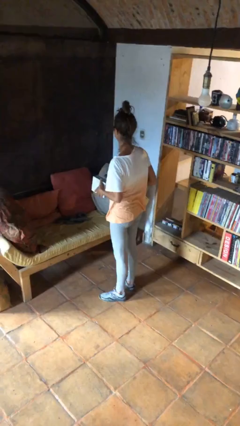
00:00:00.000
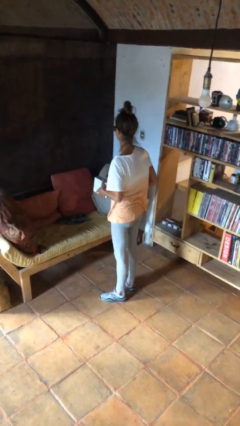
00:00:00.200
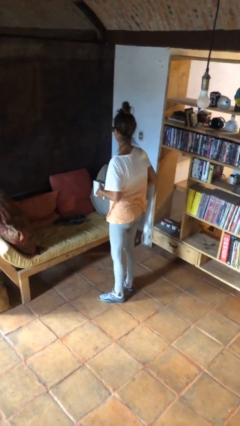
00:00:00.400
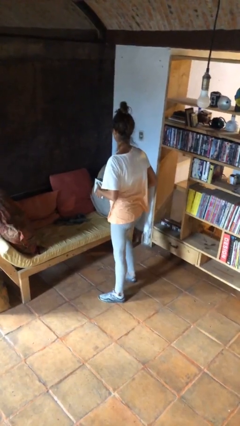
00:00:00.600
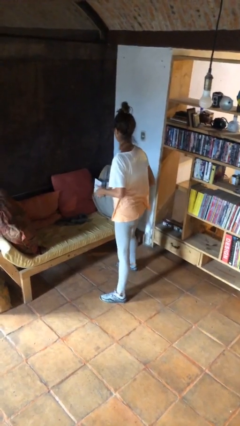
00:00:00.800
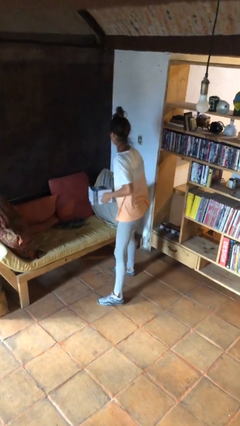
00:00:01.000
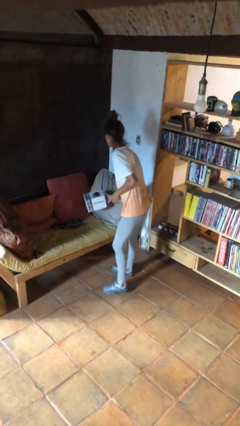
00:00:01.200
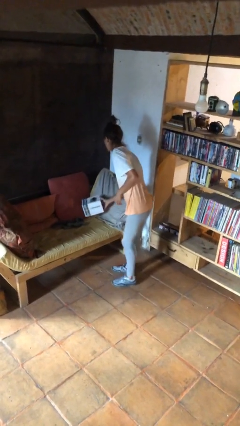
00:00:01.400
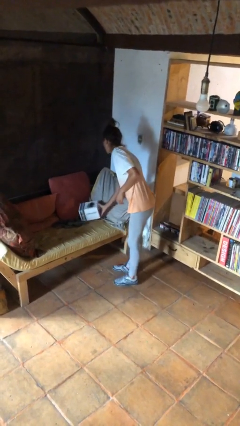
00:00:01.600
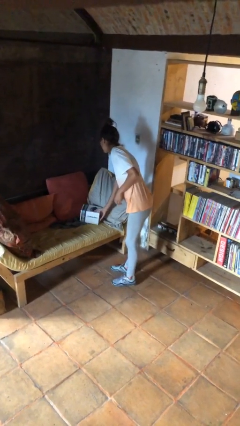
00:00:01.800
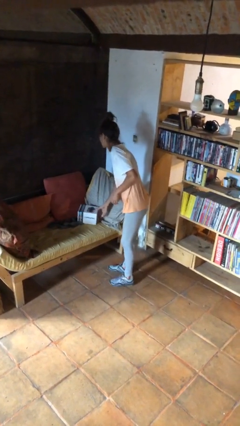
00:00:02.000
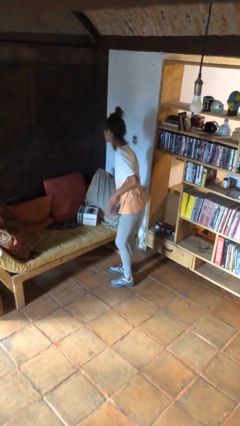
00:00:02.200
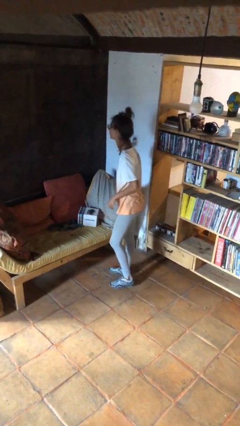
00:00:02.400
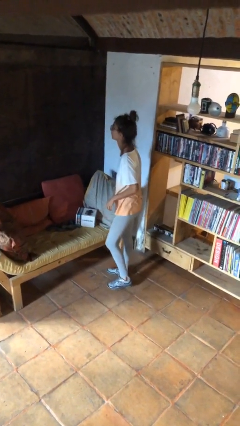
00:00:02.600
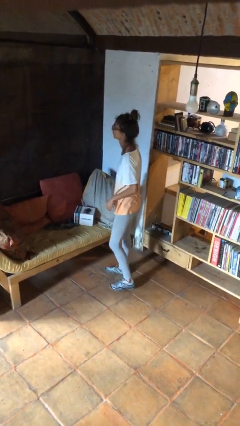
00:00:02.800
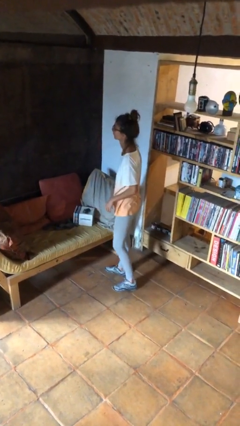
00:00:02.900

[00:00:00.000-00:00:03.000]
person puts down object on couch

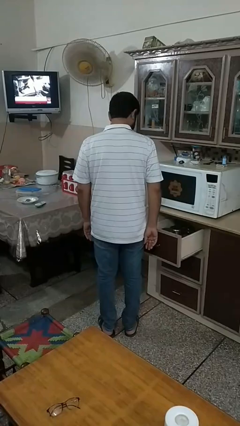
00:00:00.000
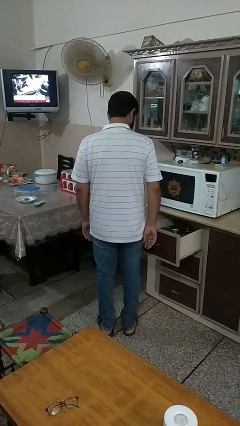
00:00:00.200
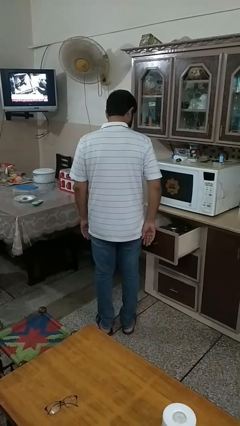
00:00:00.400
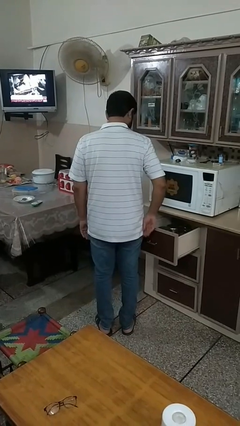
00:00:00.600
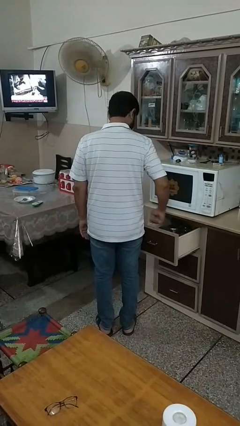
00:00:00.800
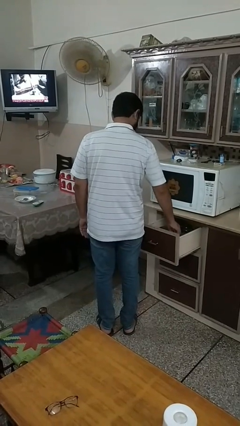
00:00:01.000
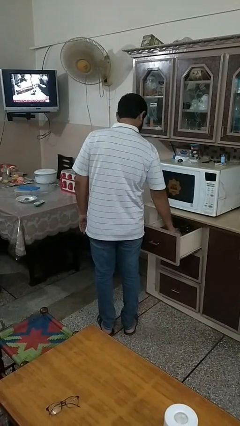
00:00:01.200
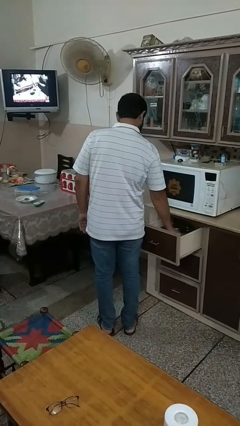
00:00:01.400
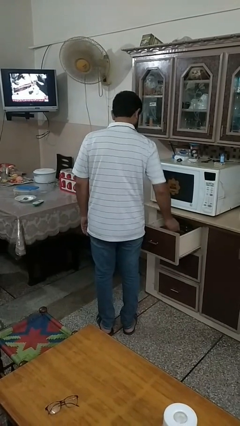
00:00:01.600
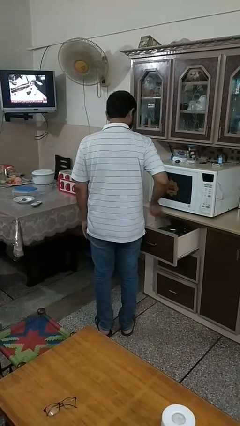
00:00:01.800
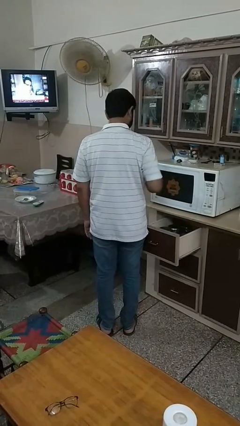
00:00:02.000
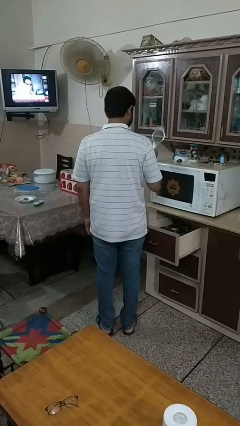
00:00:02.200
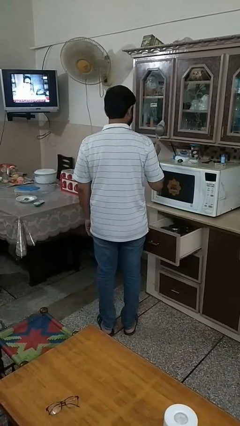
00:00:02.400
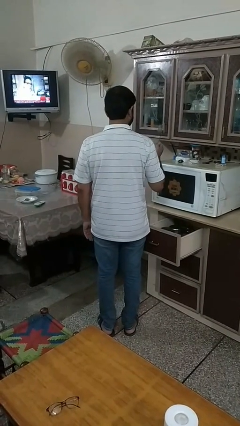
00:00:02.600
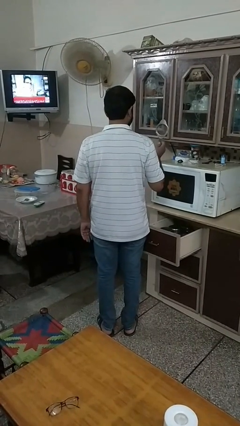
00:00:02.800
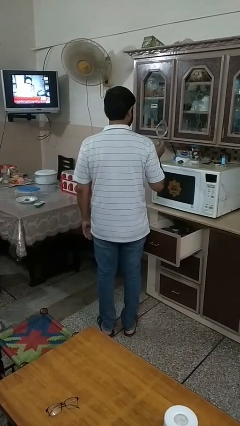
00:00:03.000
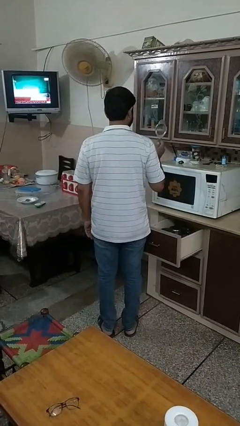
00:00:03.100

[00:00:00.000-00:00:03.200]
person takes object from kitchen drawer

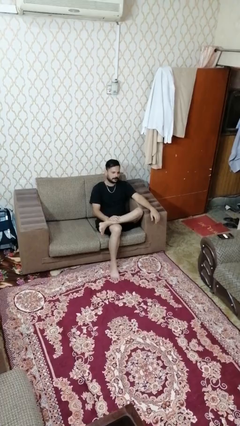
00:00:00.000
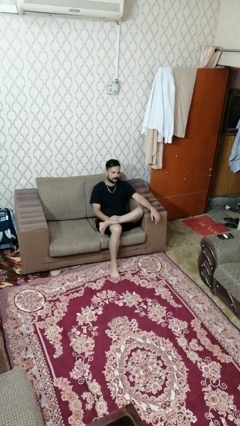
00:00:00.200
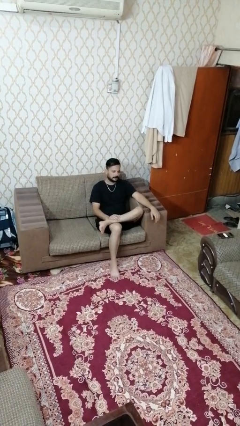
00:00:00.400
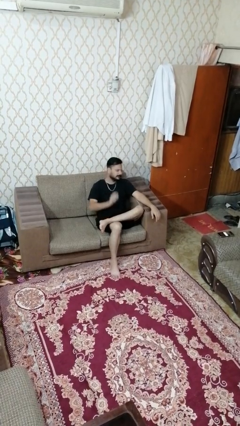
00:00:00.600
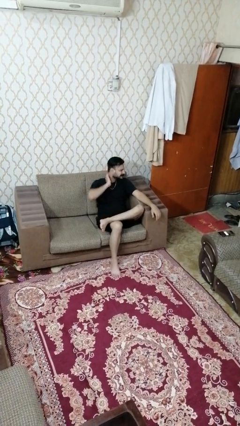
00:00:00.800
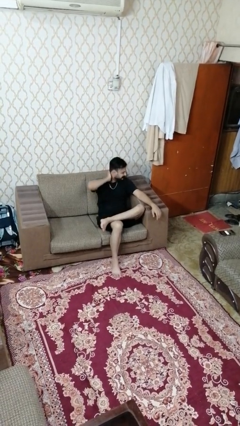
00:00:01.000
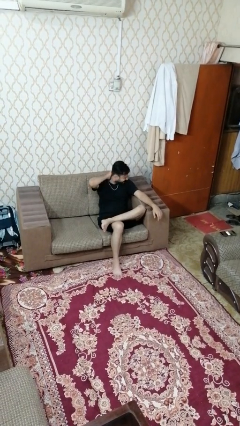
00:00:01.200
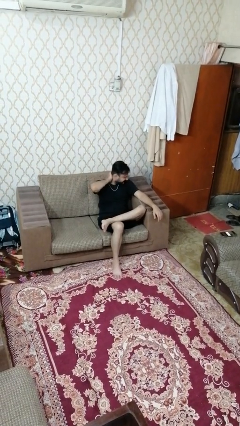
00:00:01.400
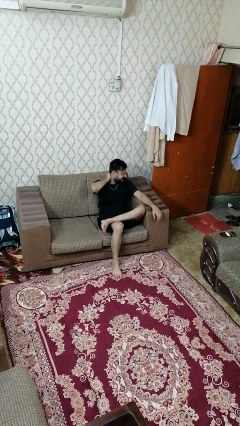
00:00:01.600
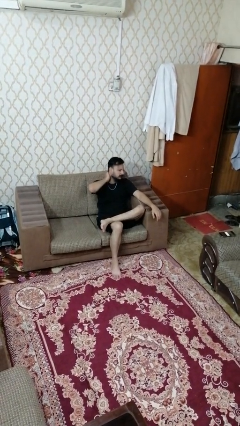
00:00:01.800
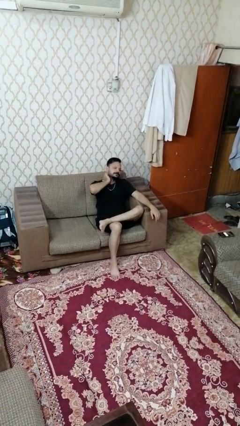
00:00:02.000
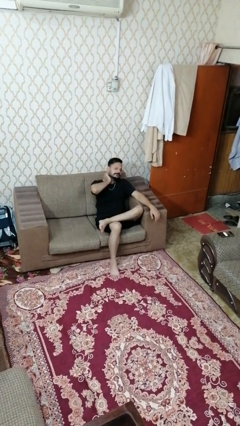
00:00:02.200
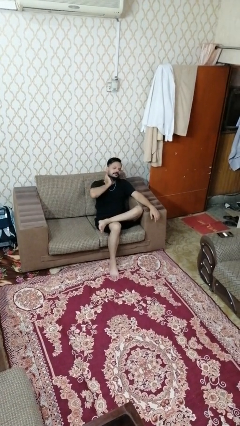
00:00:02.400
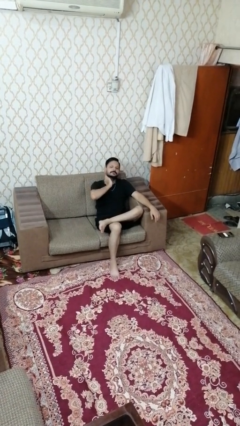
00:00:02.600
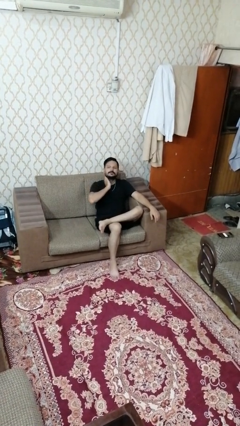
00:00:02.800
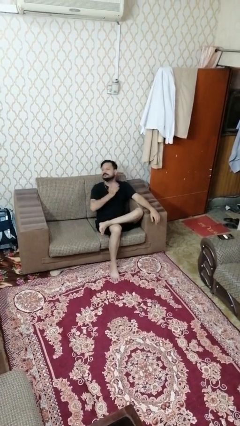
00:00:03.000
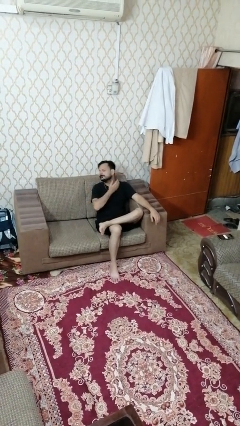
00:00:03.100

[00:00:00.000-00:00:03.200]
person rubs neck

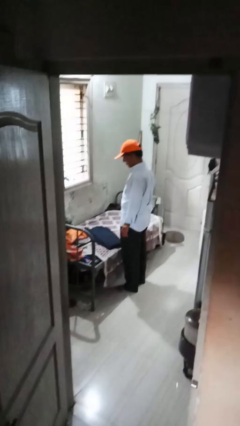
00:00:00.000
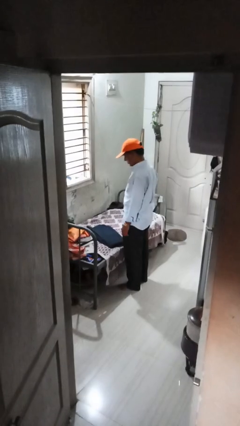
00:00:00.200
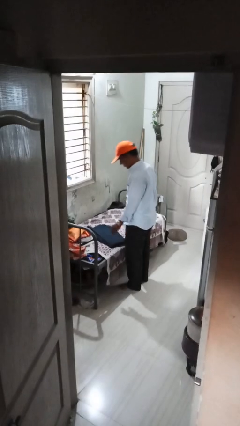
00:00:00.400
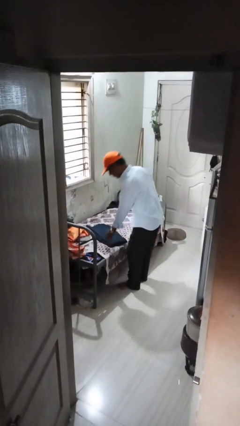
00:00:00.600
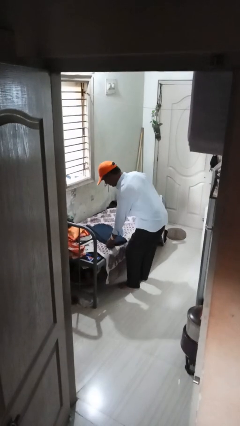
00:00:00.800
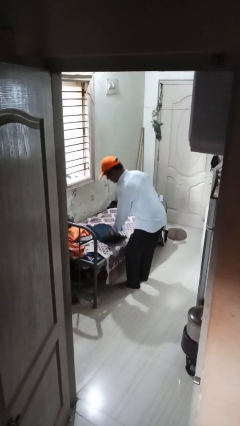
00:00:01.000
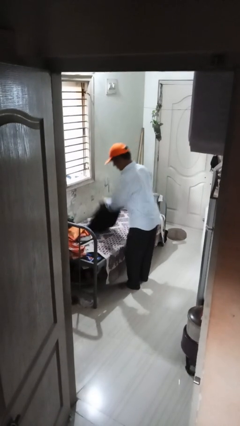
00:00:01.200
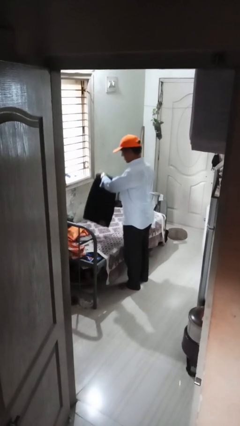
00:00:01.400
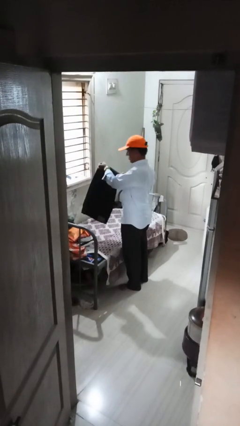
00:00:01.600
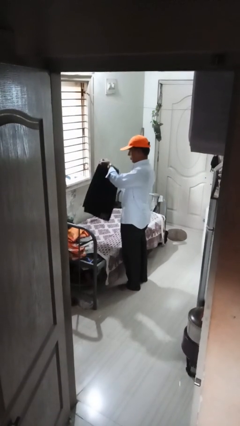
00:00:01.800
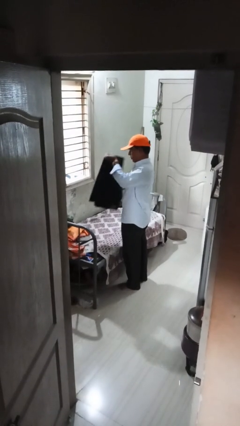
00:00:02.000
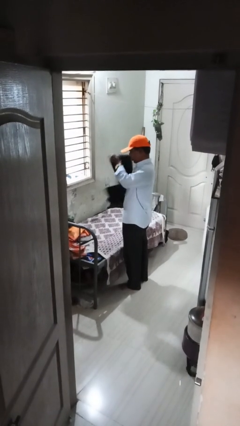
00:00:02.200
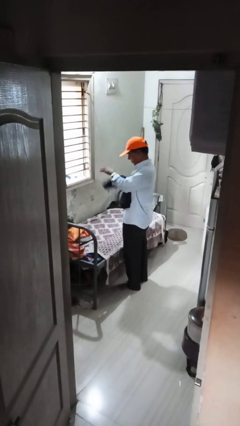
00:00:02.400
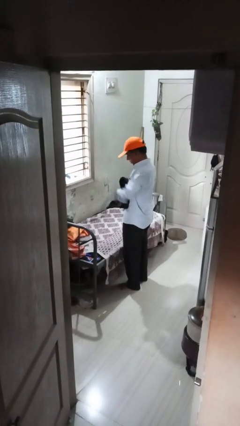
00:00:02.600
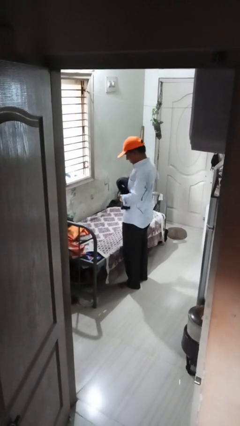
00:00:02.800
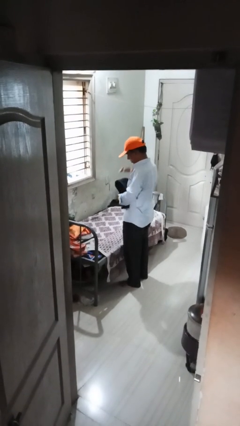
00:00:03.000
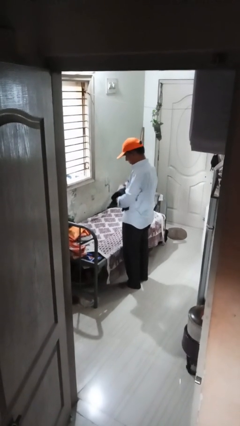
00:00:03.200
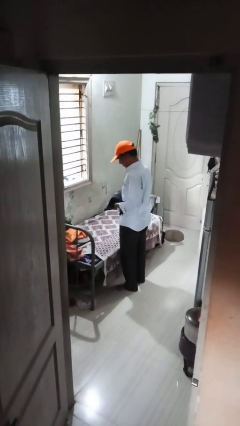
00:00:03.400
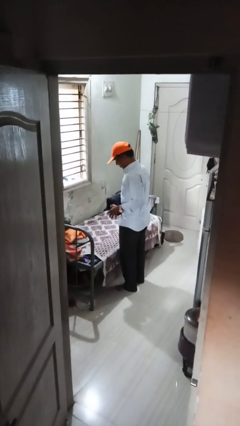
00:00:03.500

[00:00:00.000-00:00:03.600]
person folds pants

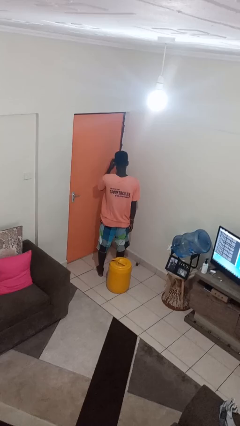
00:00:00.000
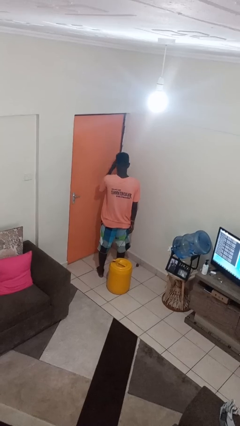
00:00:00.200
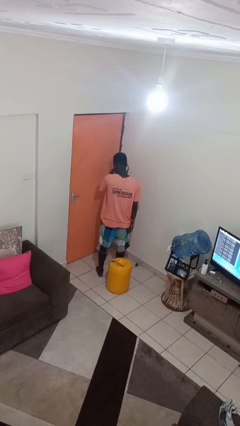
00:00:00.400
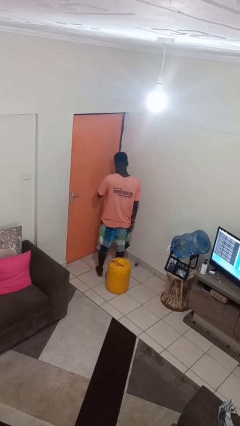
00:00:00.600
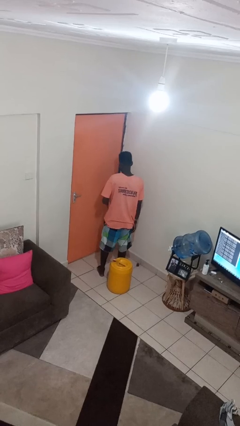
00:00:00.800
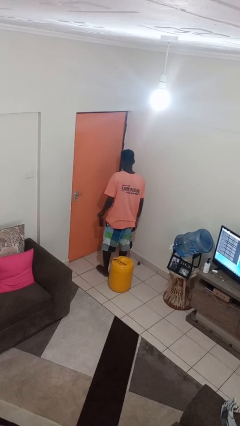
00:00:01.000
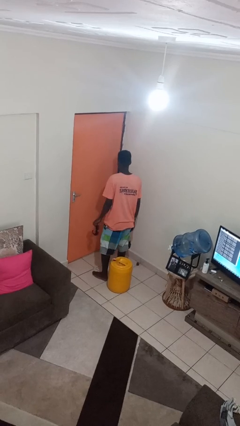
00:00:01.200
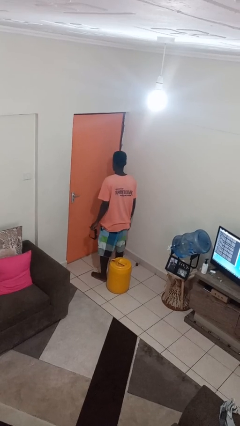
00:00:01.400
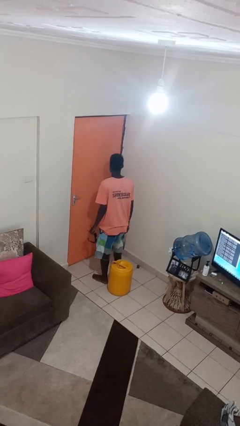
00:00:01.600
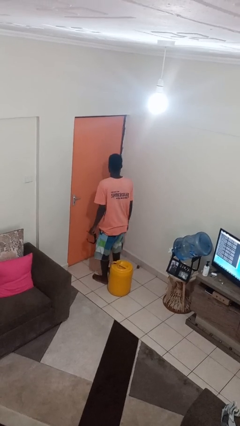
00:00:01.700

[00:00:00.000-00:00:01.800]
person takes off sunglasses

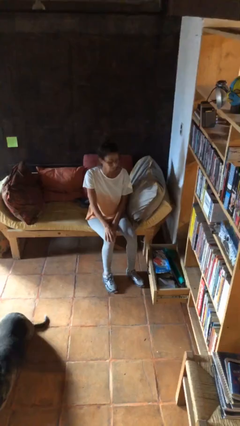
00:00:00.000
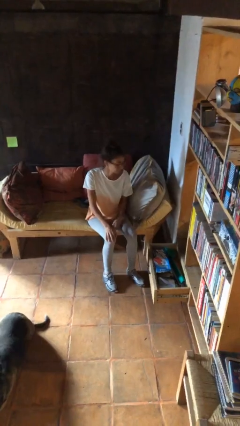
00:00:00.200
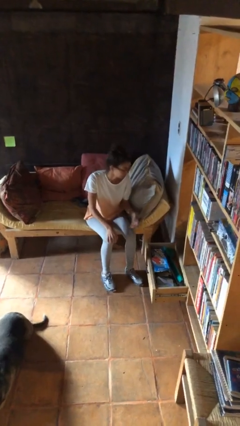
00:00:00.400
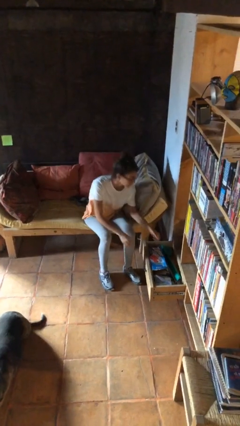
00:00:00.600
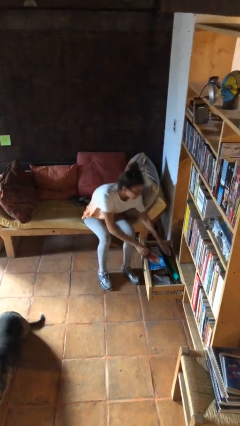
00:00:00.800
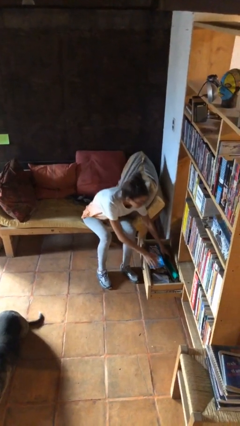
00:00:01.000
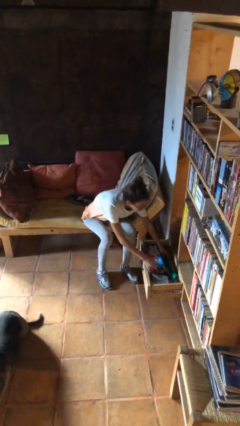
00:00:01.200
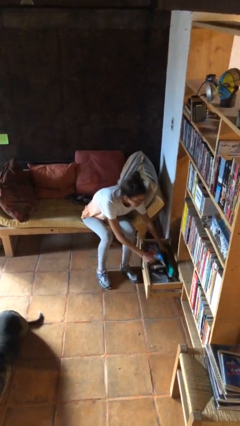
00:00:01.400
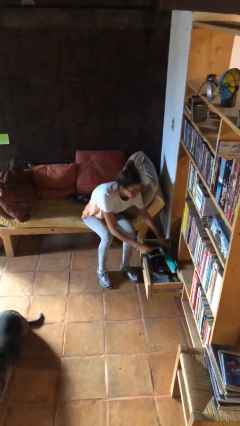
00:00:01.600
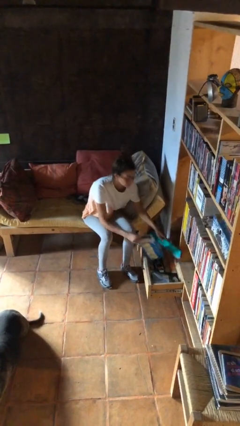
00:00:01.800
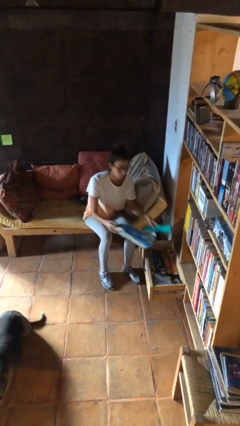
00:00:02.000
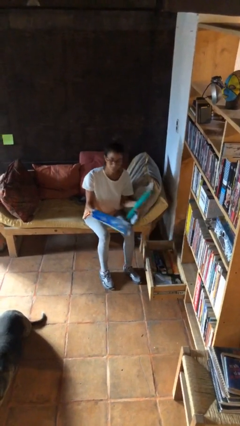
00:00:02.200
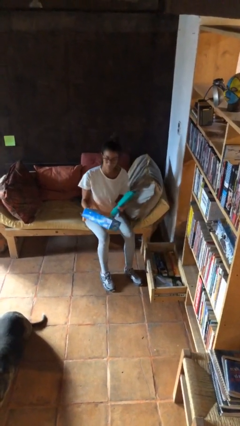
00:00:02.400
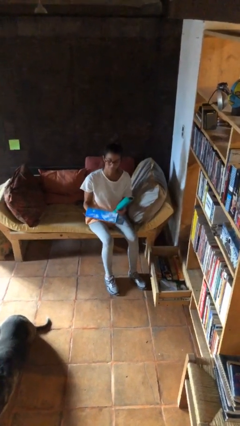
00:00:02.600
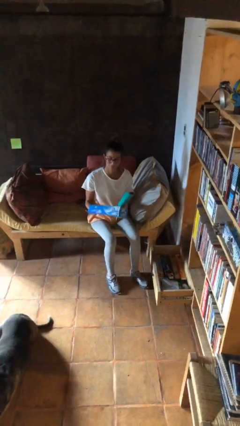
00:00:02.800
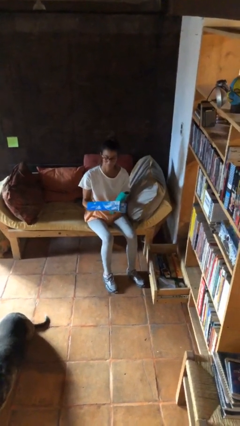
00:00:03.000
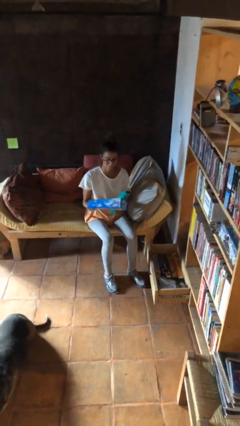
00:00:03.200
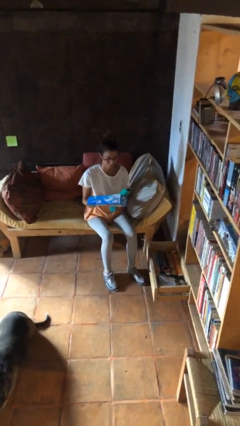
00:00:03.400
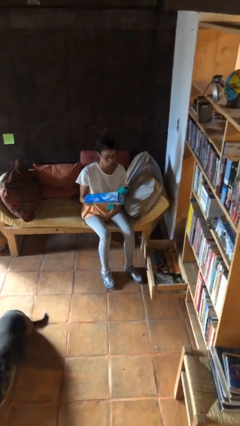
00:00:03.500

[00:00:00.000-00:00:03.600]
person picks up object from cabinet
